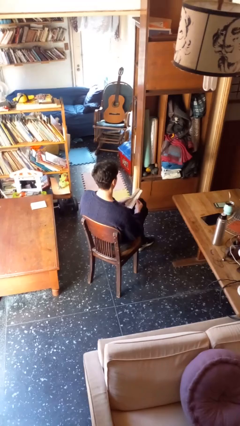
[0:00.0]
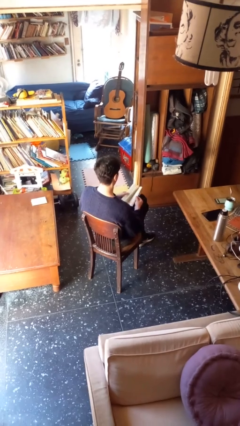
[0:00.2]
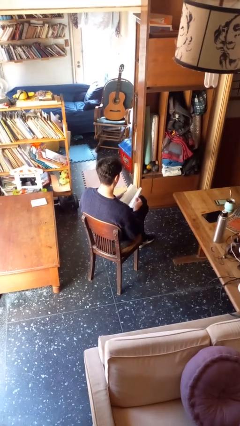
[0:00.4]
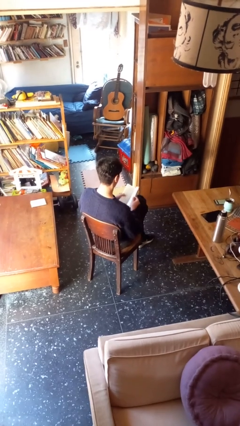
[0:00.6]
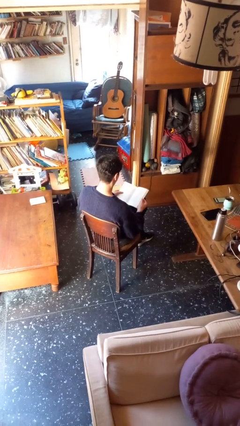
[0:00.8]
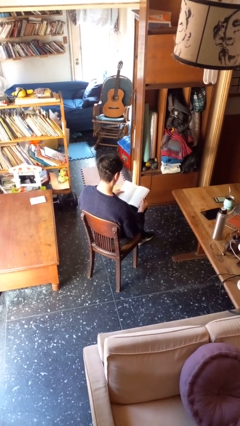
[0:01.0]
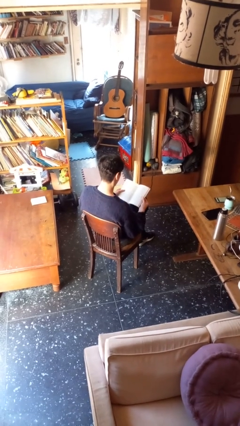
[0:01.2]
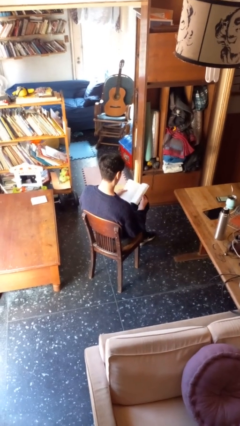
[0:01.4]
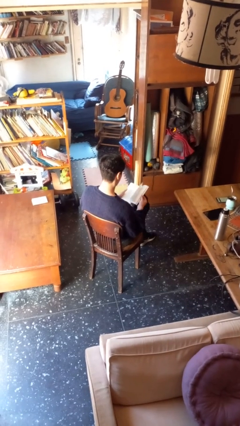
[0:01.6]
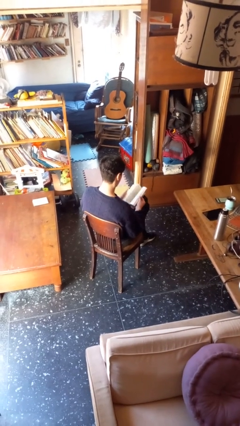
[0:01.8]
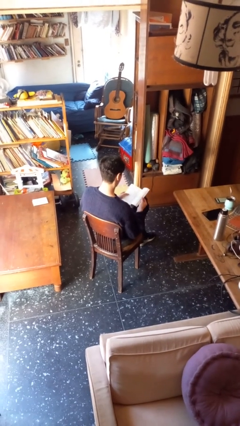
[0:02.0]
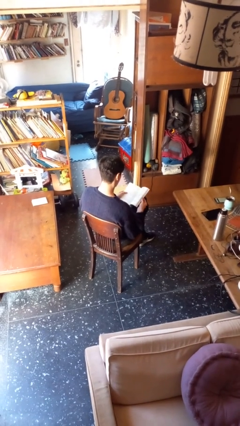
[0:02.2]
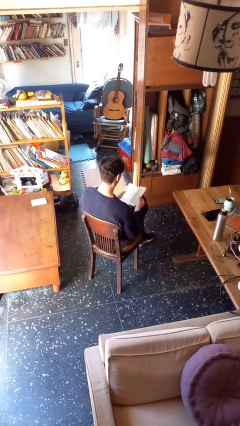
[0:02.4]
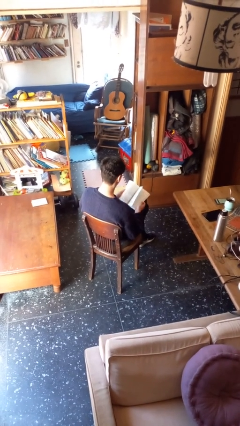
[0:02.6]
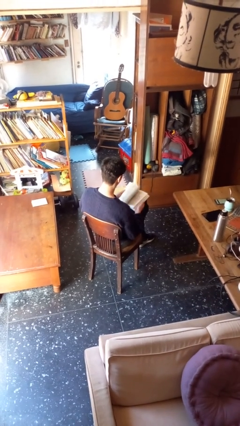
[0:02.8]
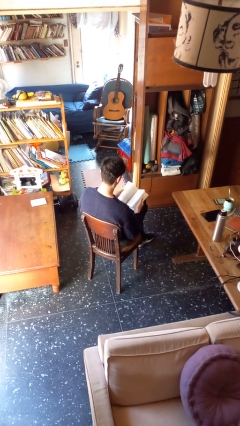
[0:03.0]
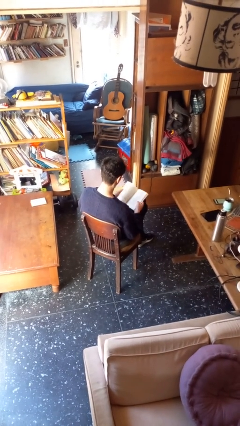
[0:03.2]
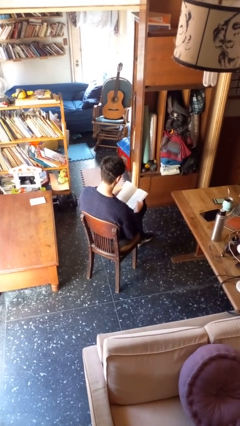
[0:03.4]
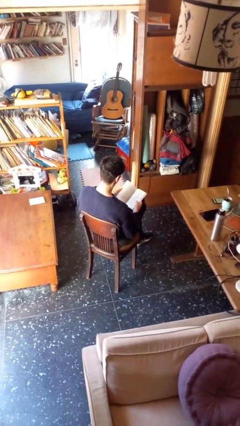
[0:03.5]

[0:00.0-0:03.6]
person reads book

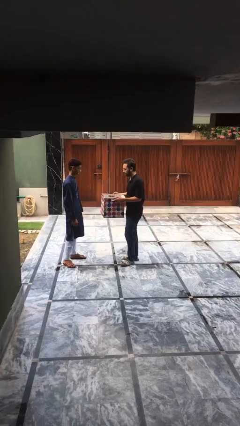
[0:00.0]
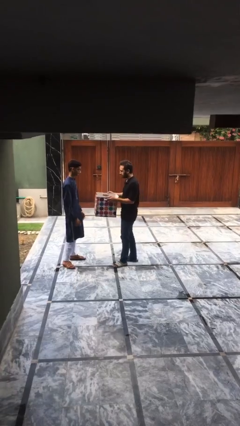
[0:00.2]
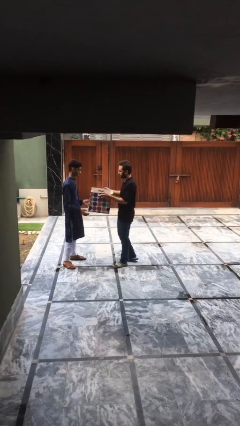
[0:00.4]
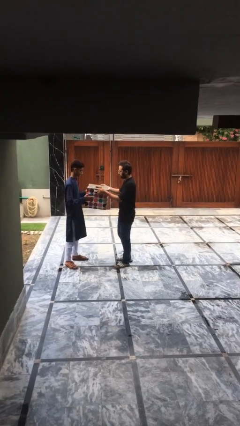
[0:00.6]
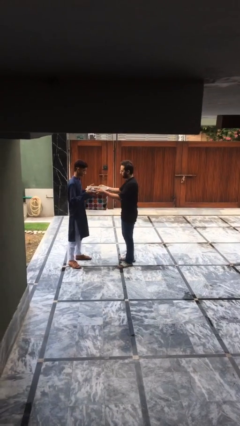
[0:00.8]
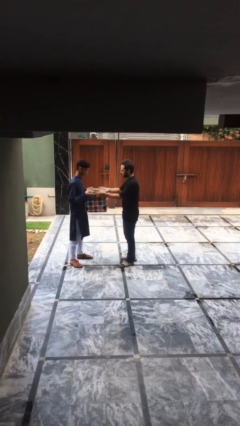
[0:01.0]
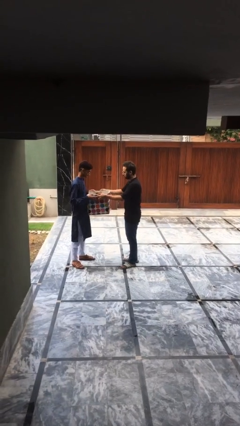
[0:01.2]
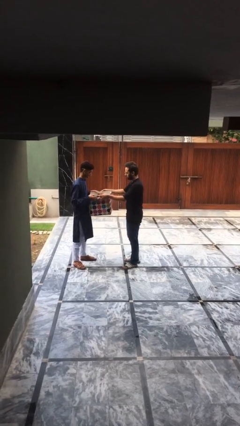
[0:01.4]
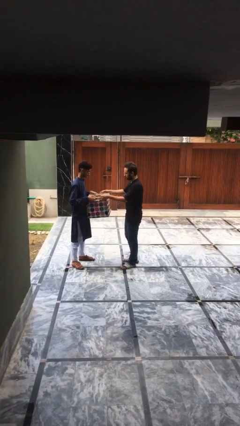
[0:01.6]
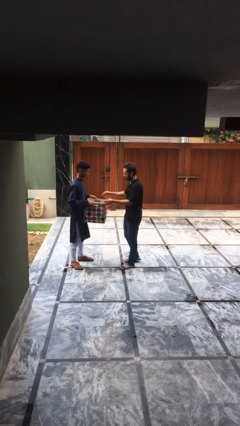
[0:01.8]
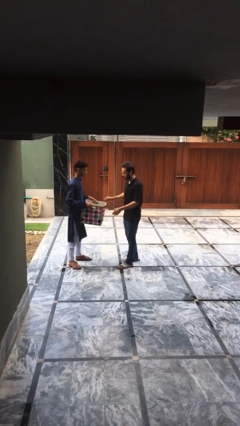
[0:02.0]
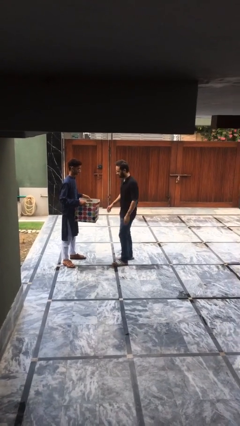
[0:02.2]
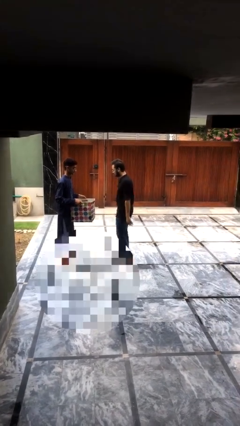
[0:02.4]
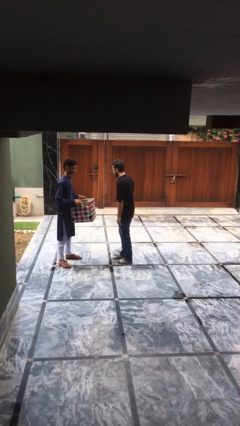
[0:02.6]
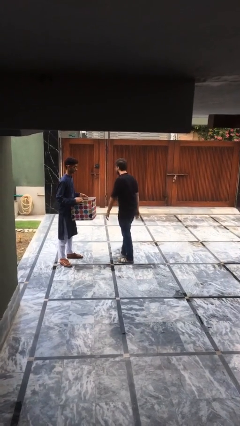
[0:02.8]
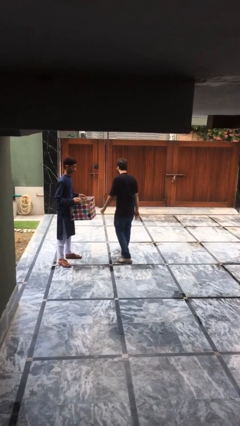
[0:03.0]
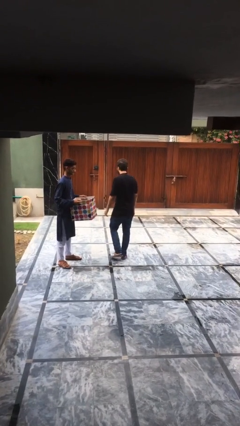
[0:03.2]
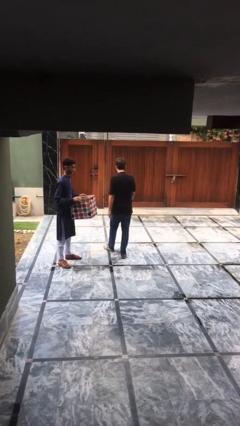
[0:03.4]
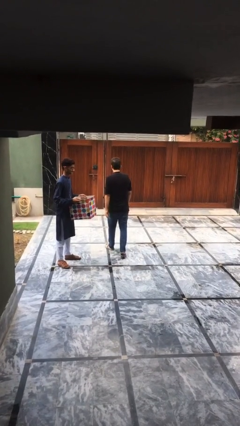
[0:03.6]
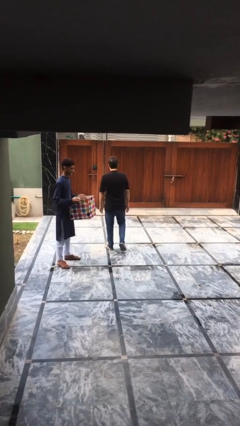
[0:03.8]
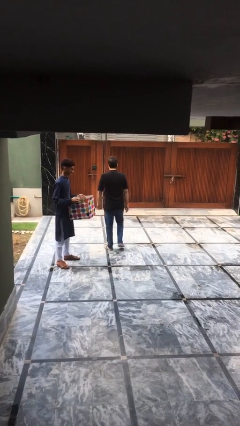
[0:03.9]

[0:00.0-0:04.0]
person transfers object to person

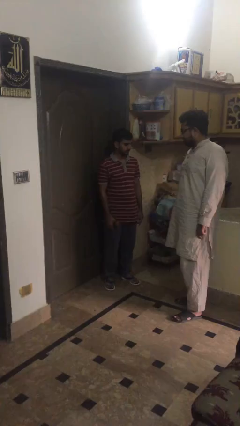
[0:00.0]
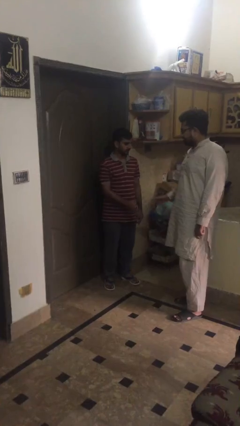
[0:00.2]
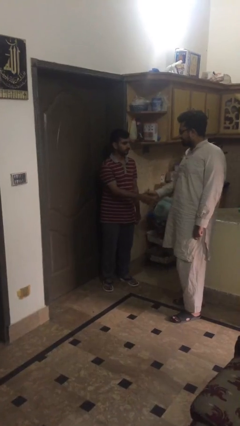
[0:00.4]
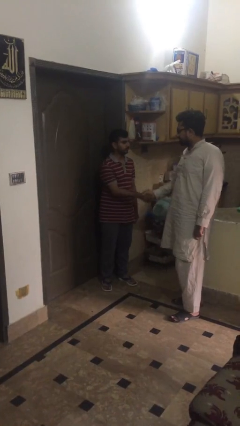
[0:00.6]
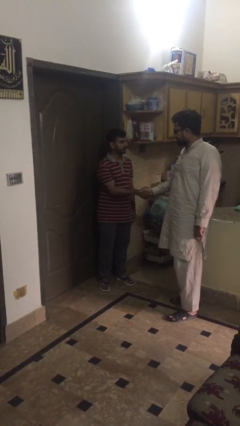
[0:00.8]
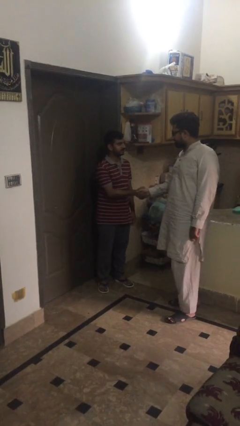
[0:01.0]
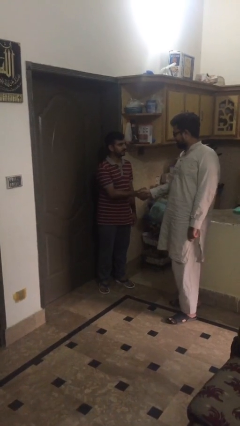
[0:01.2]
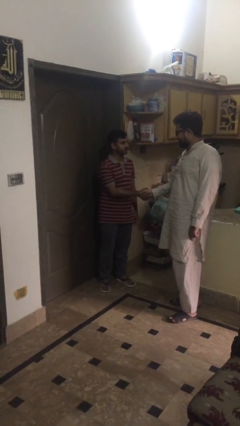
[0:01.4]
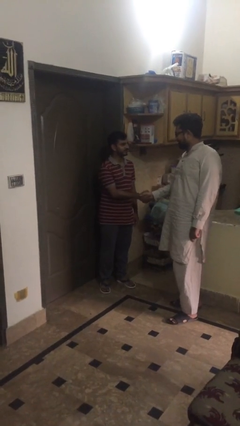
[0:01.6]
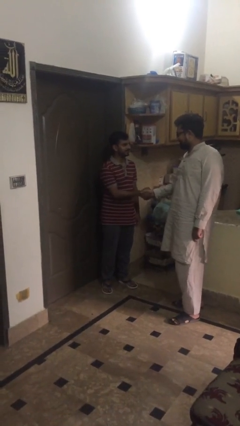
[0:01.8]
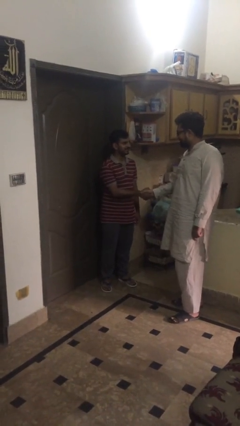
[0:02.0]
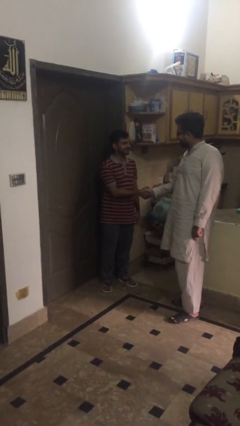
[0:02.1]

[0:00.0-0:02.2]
person shakes hand

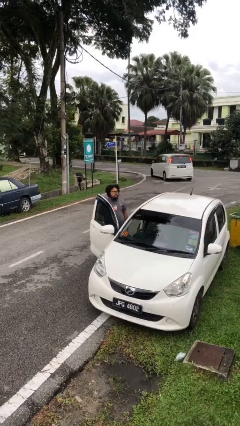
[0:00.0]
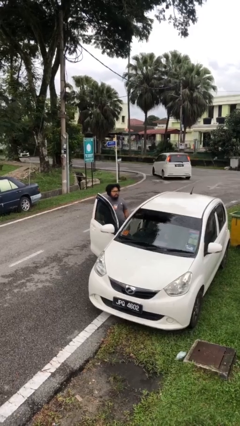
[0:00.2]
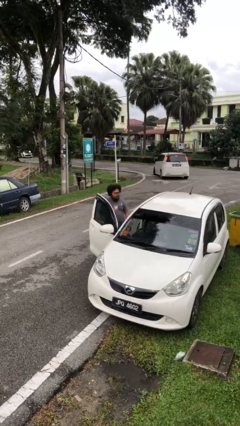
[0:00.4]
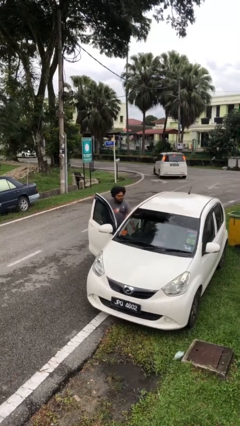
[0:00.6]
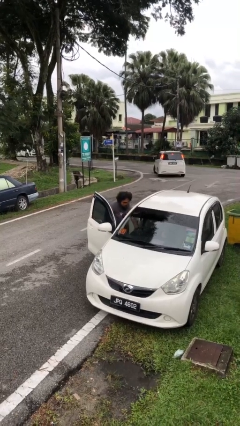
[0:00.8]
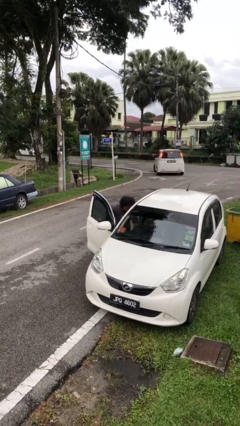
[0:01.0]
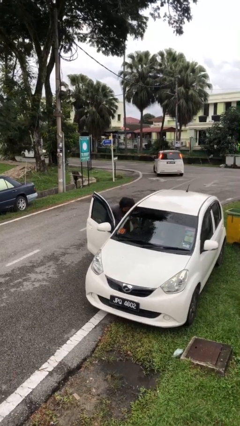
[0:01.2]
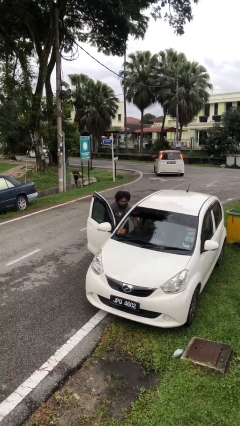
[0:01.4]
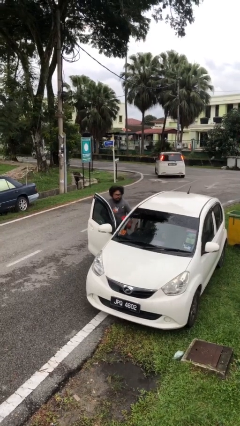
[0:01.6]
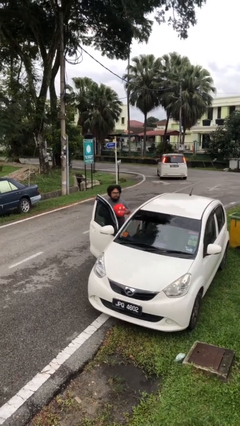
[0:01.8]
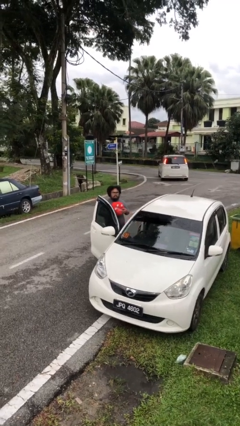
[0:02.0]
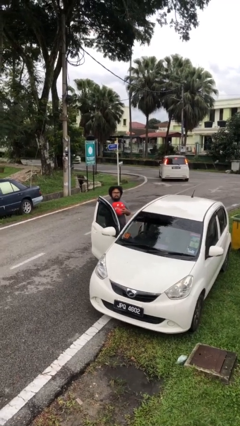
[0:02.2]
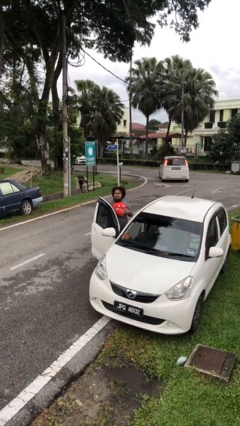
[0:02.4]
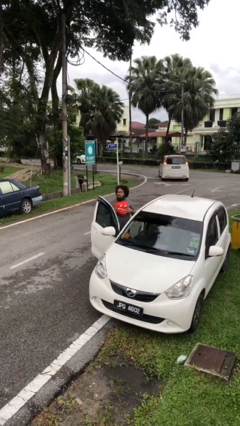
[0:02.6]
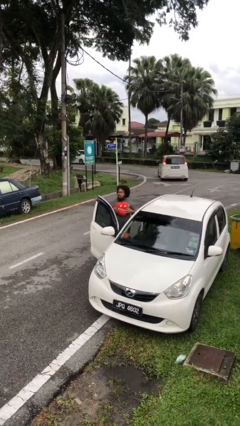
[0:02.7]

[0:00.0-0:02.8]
person unloads car

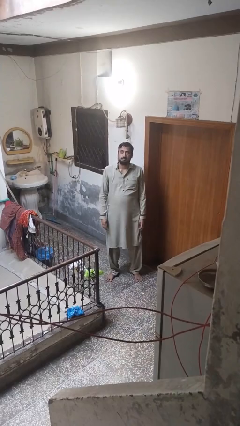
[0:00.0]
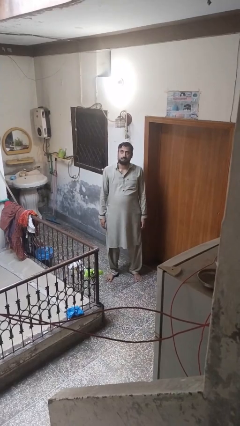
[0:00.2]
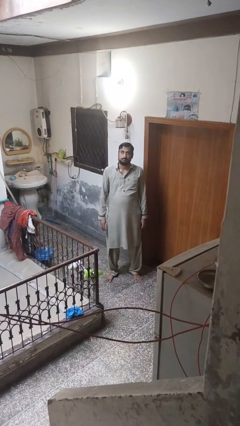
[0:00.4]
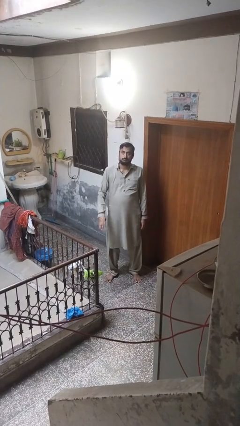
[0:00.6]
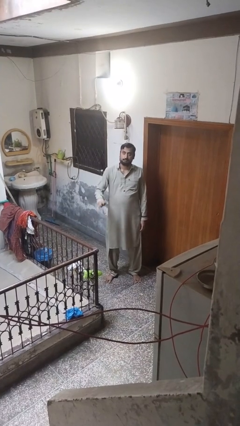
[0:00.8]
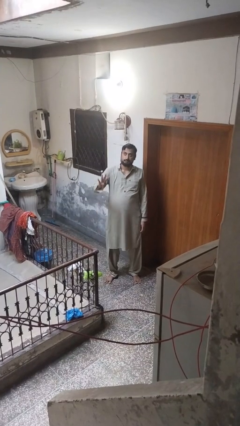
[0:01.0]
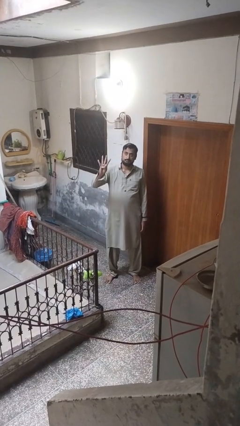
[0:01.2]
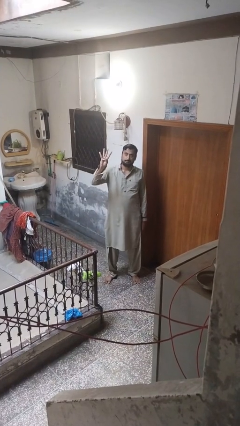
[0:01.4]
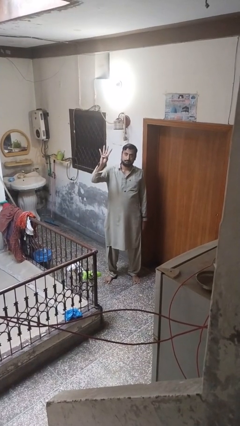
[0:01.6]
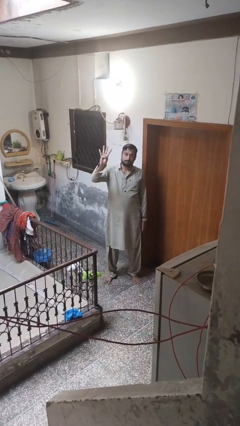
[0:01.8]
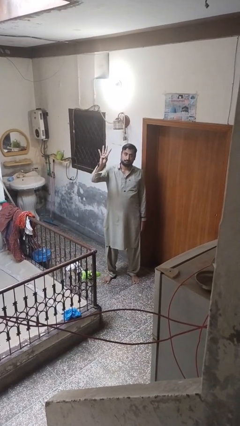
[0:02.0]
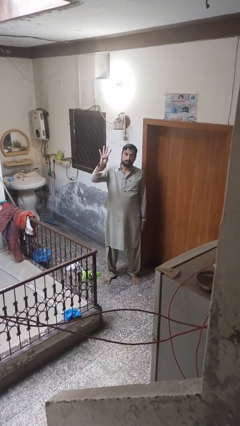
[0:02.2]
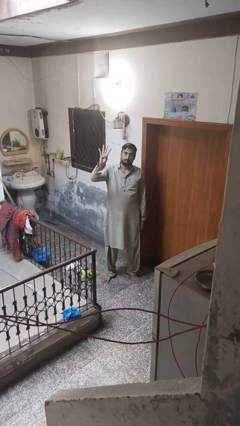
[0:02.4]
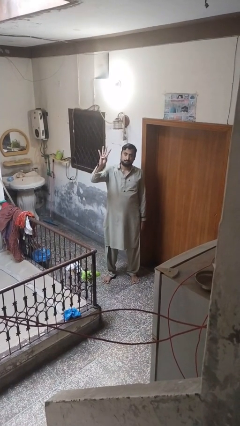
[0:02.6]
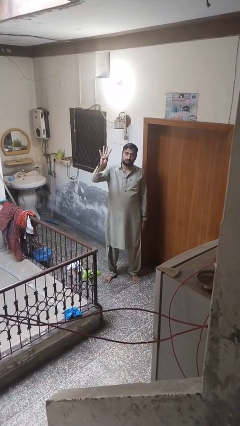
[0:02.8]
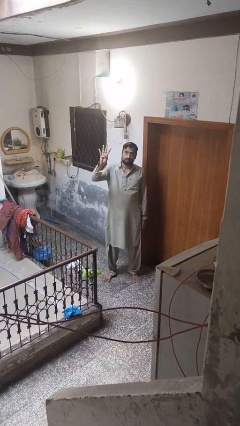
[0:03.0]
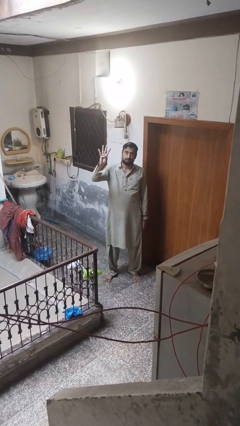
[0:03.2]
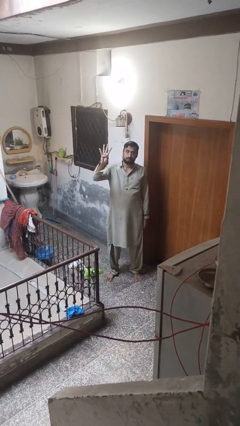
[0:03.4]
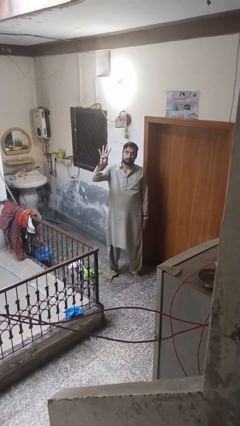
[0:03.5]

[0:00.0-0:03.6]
person gestures number four

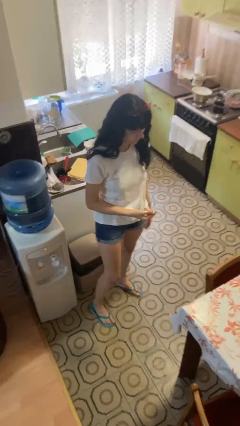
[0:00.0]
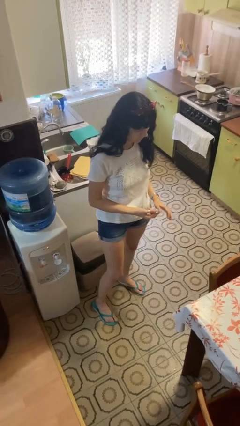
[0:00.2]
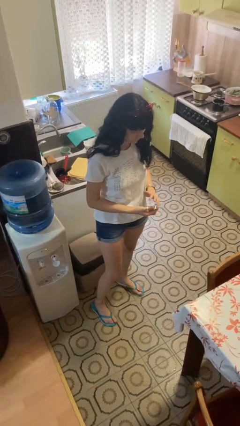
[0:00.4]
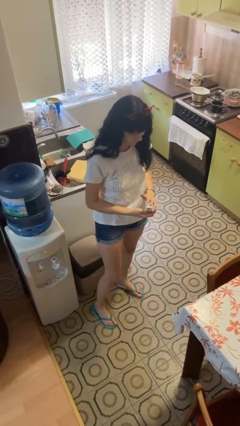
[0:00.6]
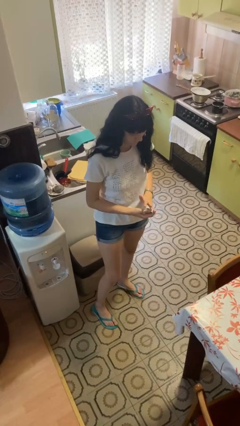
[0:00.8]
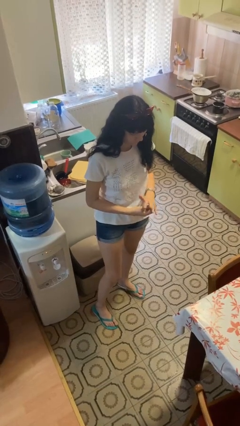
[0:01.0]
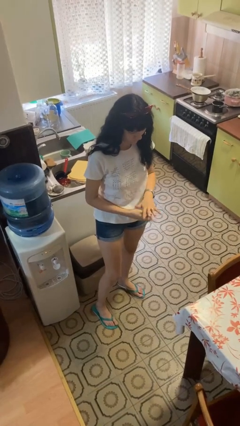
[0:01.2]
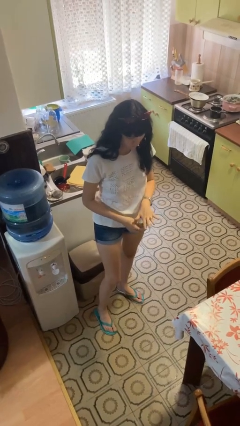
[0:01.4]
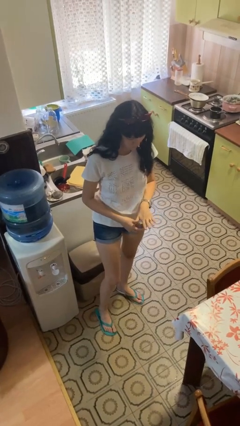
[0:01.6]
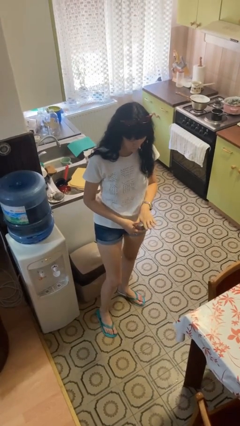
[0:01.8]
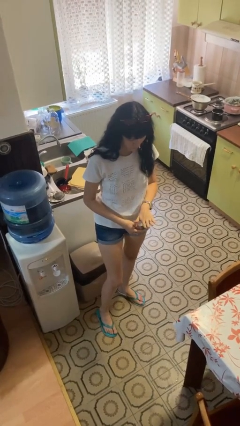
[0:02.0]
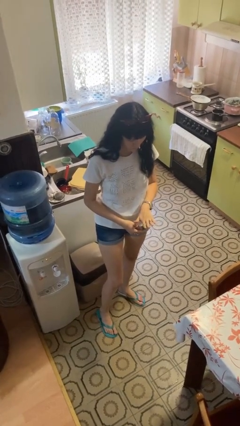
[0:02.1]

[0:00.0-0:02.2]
person puts on ring
